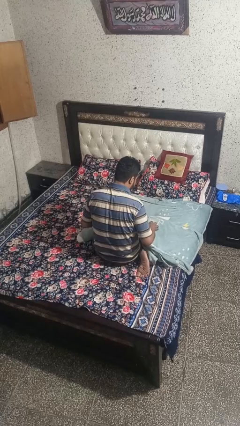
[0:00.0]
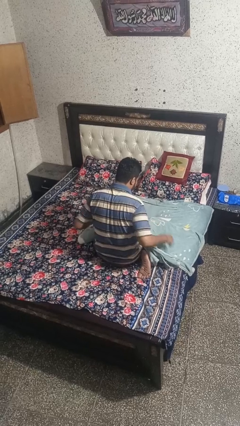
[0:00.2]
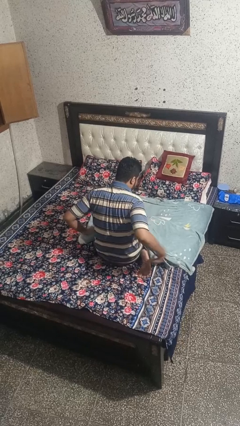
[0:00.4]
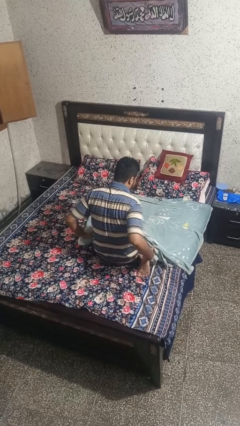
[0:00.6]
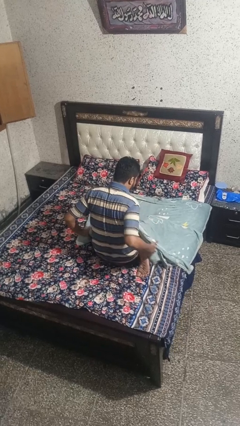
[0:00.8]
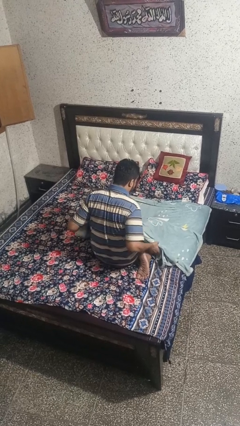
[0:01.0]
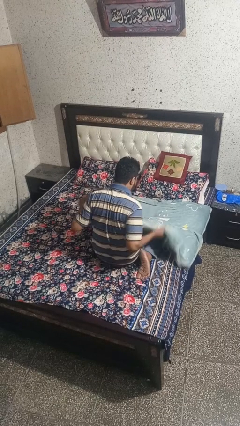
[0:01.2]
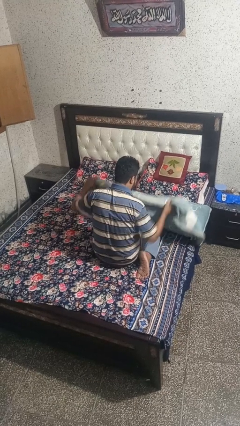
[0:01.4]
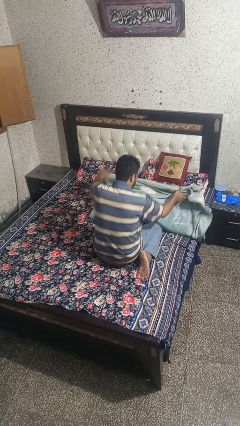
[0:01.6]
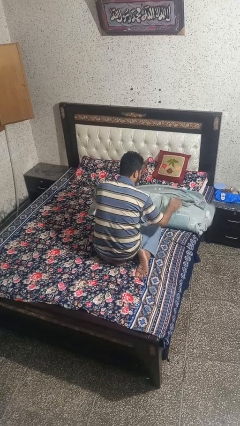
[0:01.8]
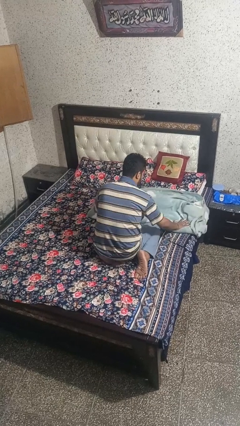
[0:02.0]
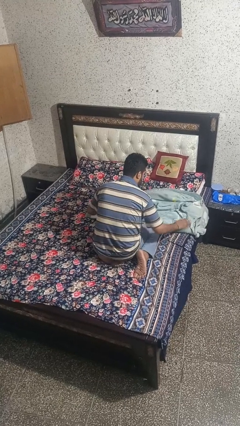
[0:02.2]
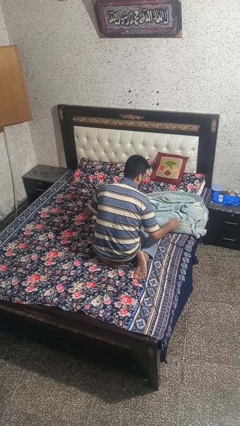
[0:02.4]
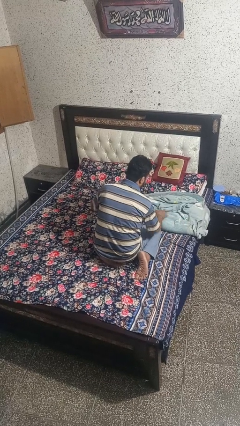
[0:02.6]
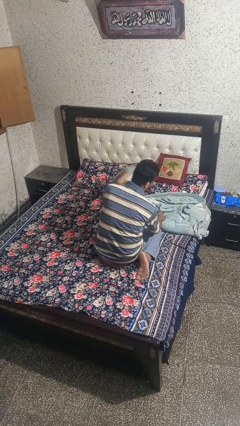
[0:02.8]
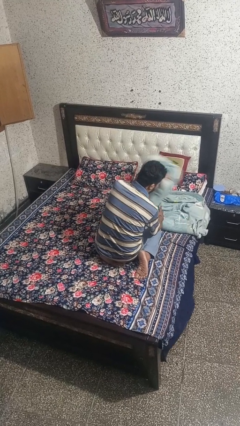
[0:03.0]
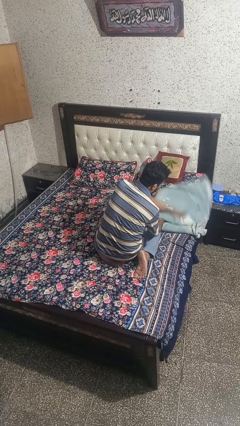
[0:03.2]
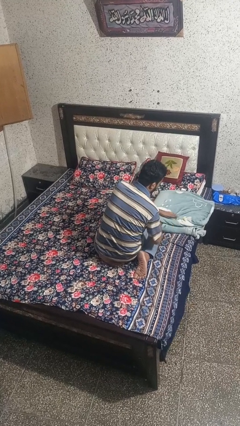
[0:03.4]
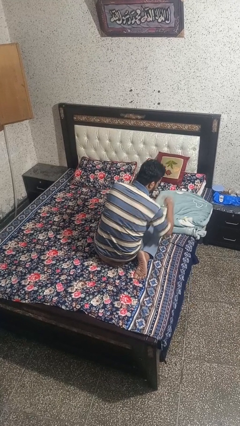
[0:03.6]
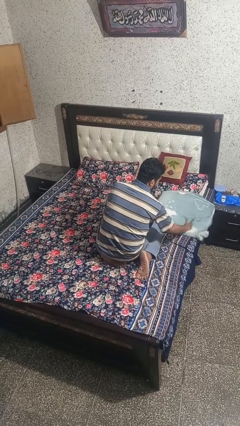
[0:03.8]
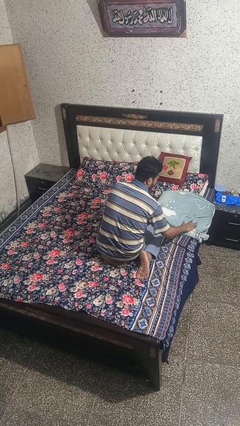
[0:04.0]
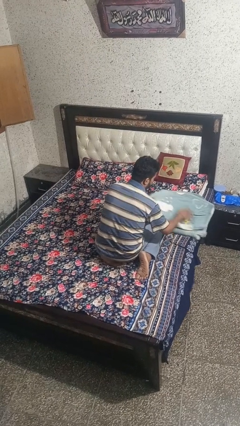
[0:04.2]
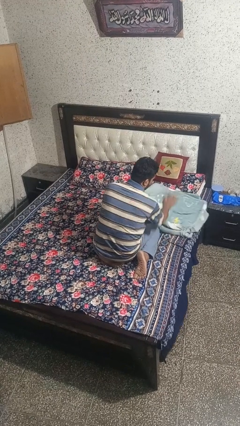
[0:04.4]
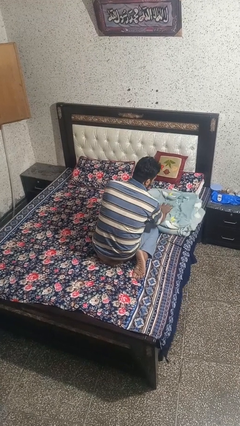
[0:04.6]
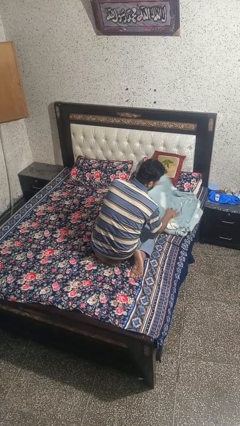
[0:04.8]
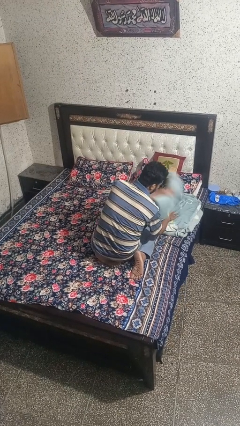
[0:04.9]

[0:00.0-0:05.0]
person folds blanket

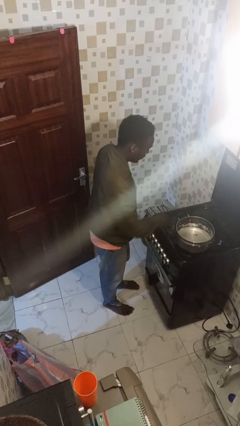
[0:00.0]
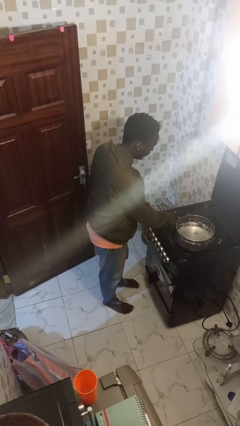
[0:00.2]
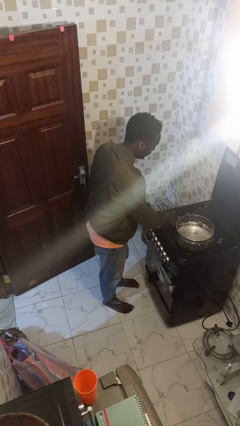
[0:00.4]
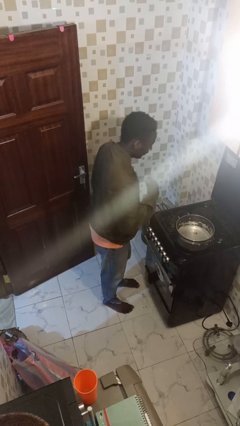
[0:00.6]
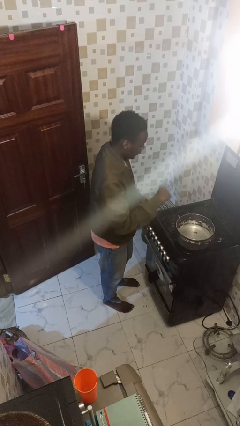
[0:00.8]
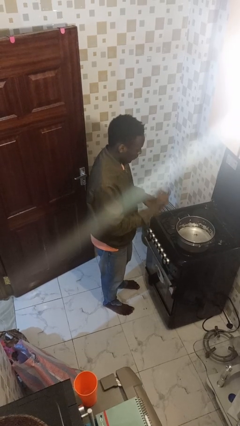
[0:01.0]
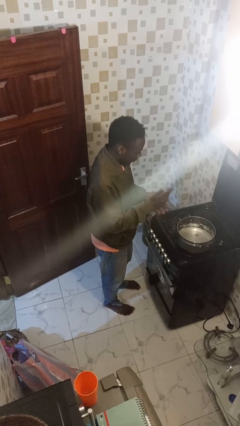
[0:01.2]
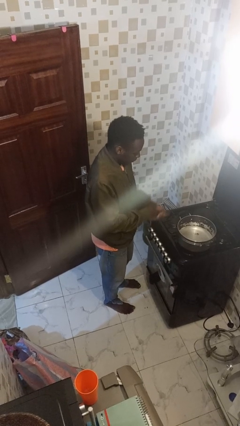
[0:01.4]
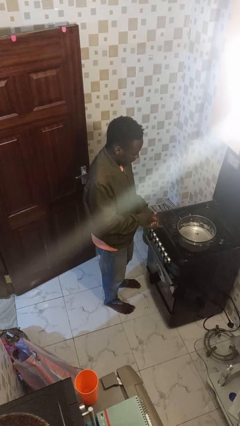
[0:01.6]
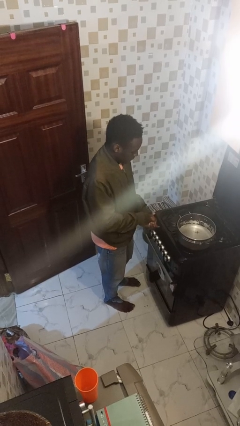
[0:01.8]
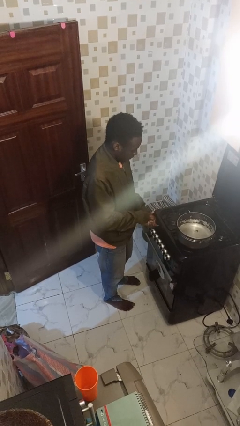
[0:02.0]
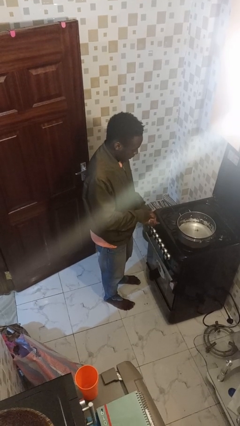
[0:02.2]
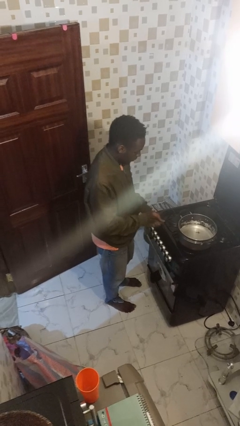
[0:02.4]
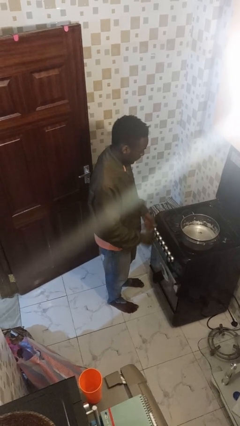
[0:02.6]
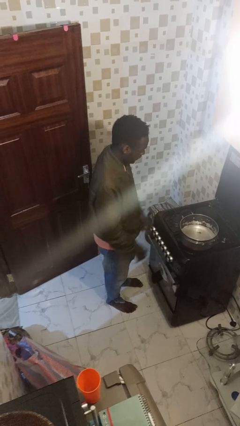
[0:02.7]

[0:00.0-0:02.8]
person burns hand

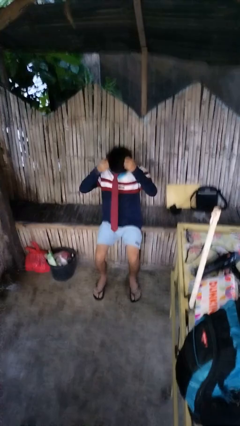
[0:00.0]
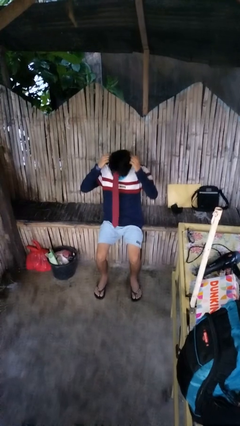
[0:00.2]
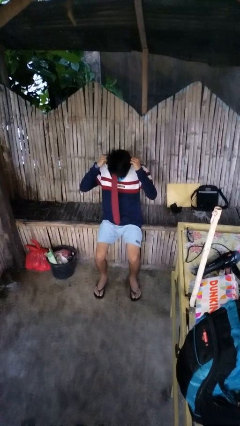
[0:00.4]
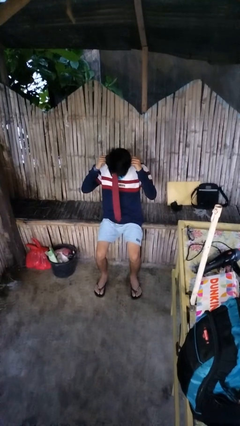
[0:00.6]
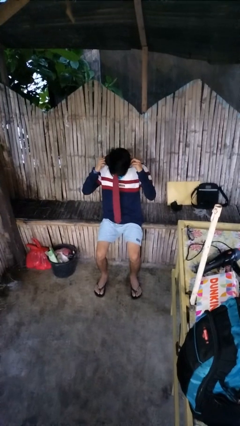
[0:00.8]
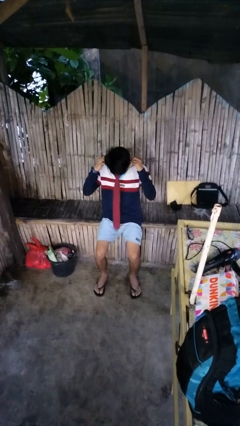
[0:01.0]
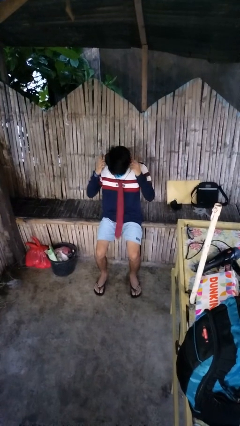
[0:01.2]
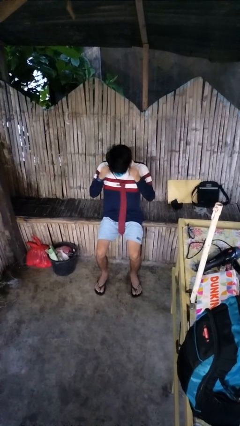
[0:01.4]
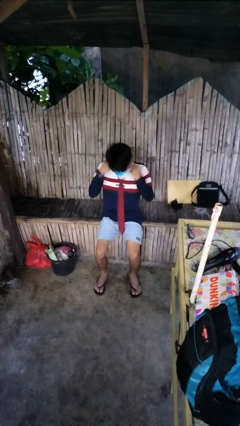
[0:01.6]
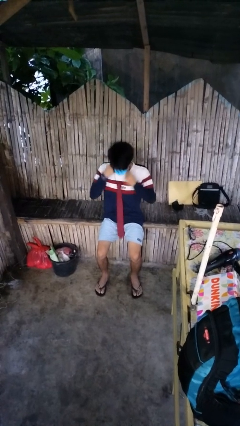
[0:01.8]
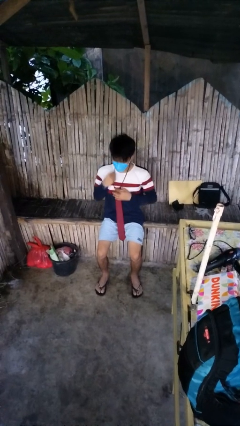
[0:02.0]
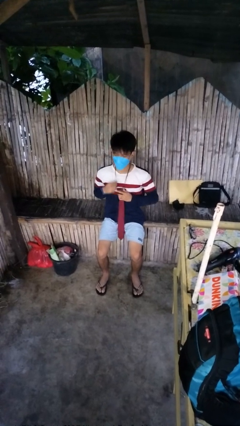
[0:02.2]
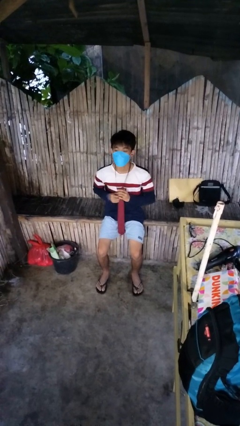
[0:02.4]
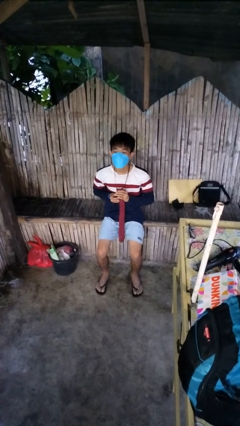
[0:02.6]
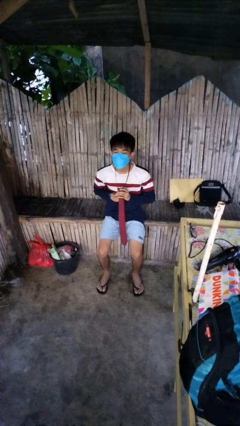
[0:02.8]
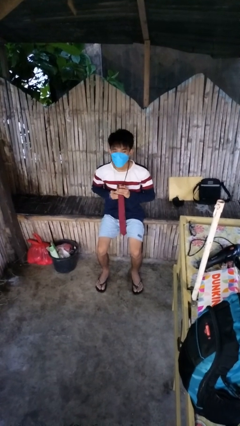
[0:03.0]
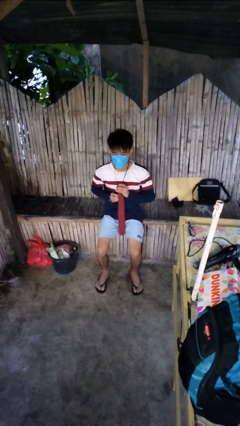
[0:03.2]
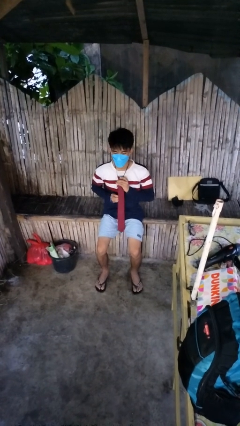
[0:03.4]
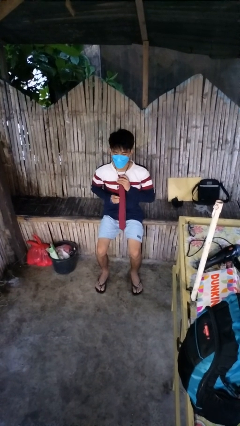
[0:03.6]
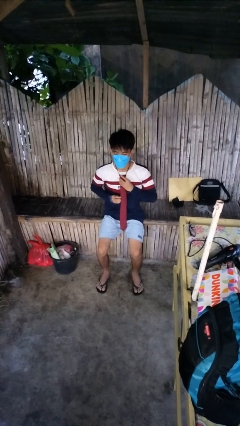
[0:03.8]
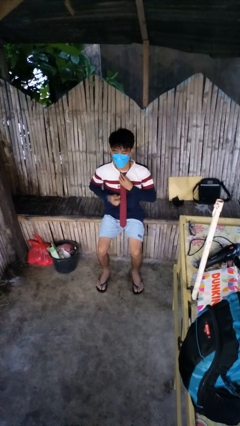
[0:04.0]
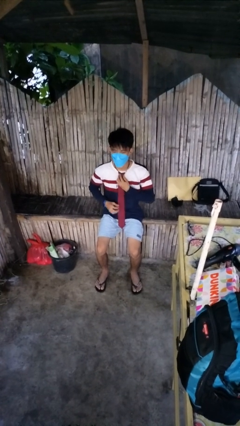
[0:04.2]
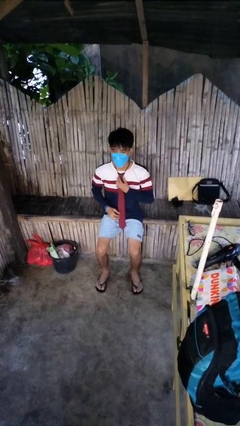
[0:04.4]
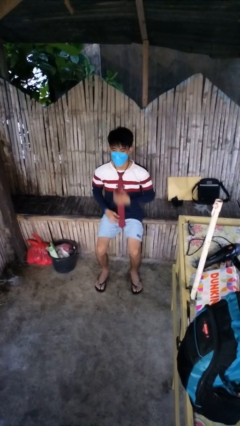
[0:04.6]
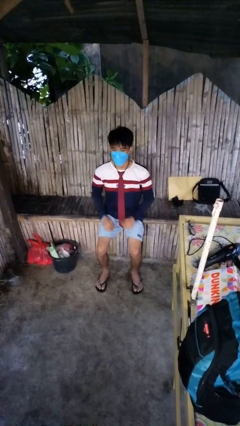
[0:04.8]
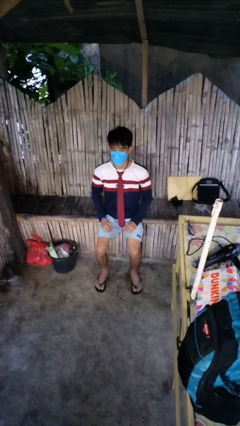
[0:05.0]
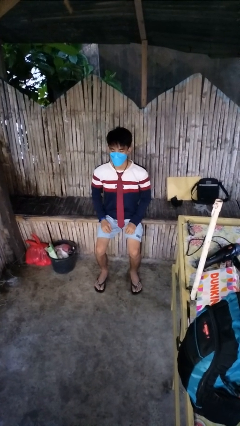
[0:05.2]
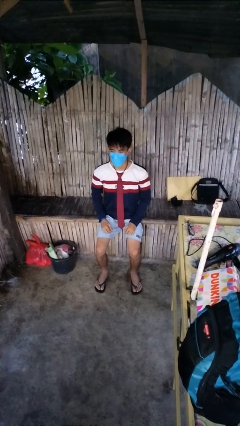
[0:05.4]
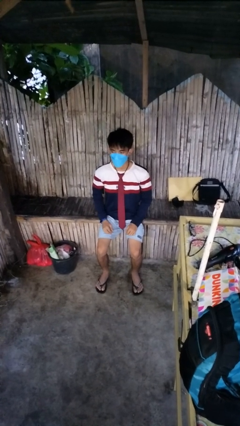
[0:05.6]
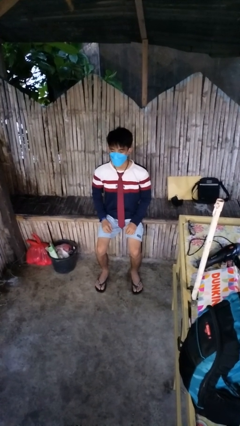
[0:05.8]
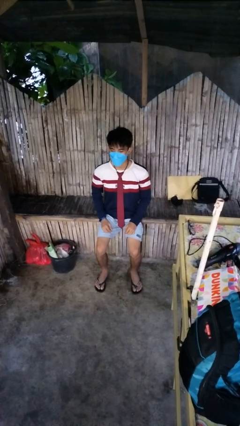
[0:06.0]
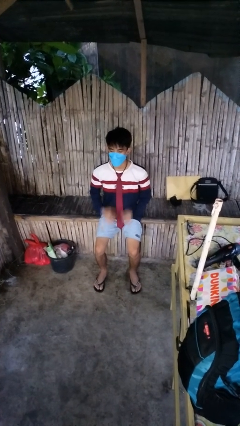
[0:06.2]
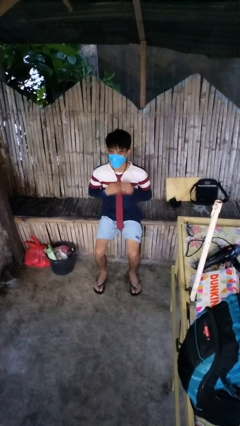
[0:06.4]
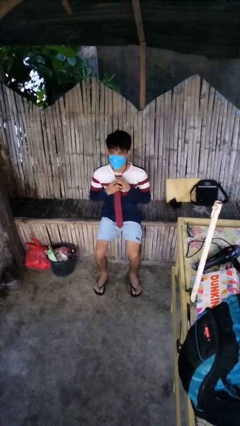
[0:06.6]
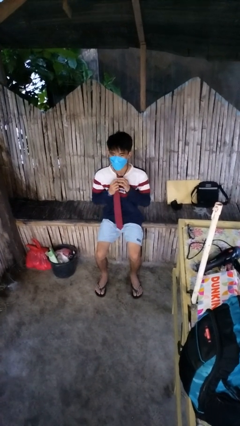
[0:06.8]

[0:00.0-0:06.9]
person puts on necktie

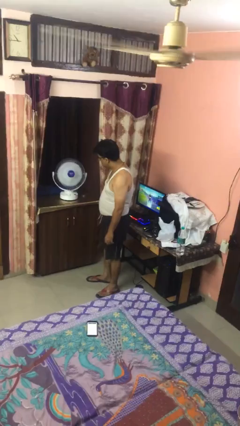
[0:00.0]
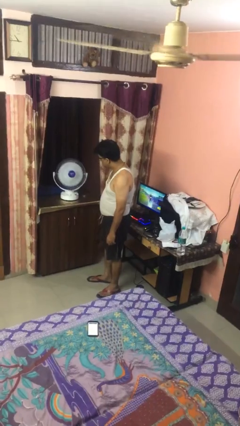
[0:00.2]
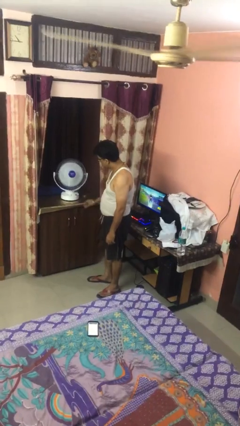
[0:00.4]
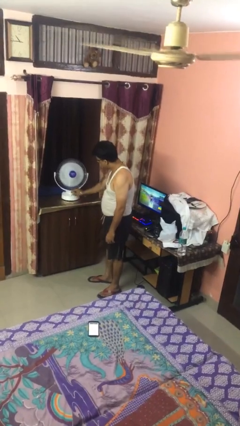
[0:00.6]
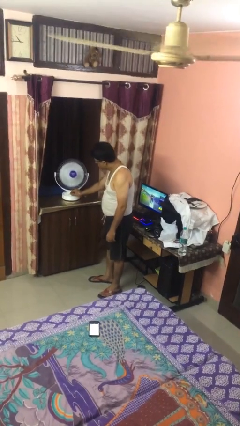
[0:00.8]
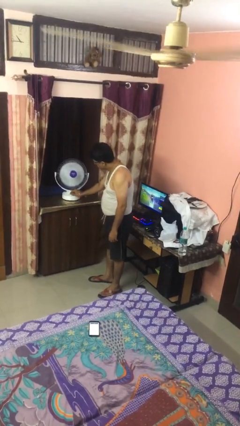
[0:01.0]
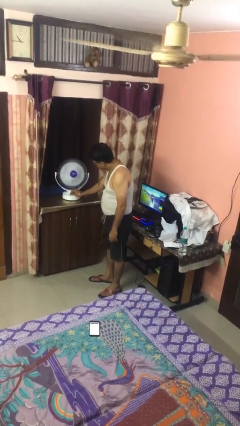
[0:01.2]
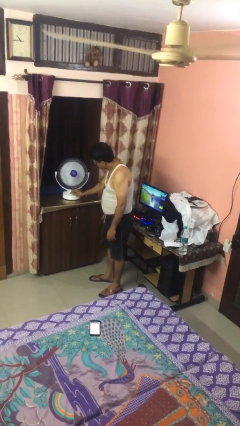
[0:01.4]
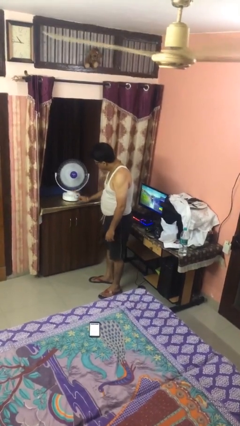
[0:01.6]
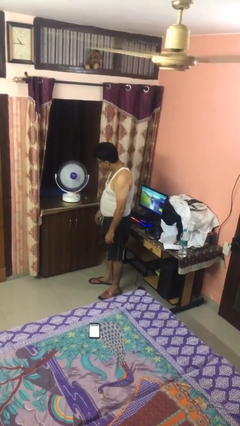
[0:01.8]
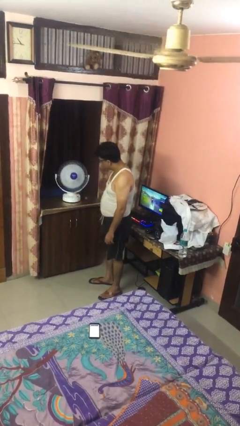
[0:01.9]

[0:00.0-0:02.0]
person turns off fan

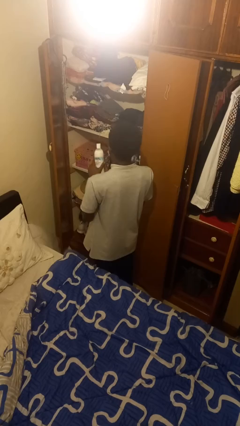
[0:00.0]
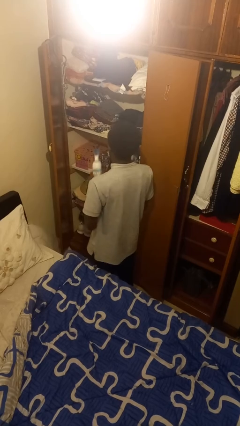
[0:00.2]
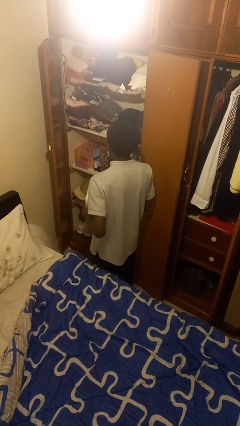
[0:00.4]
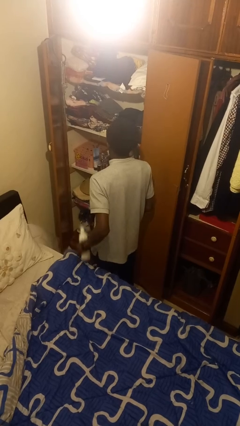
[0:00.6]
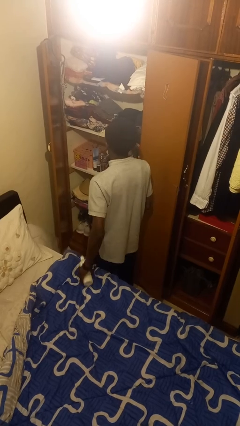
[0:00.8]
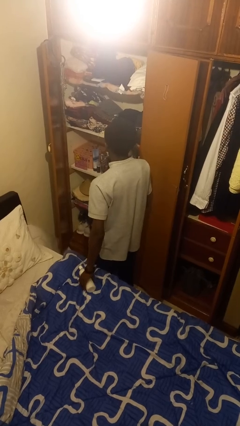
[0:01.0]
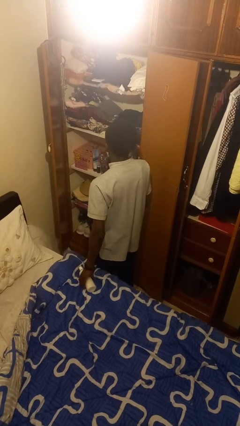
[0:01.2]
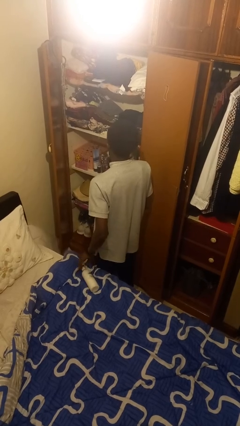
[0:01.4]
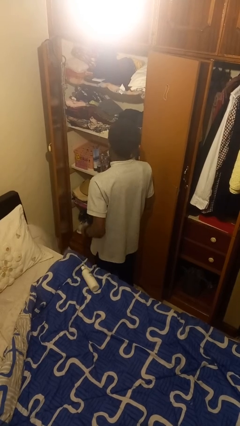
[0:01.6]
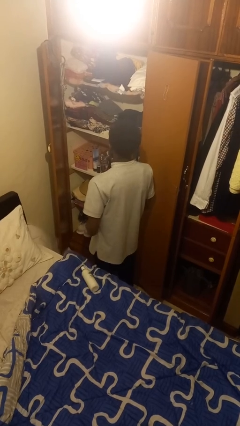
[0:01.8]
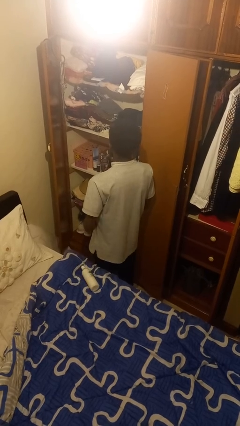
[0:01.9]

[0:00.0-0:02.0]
person puts down object on bed
